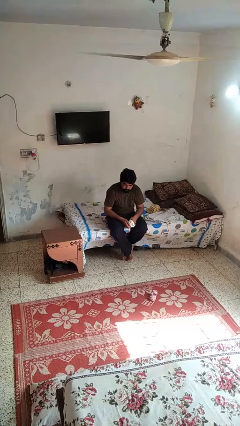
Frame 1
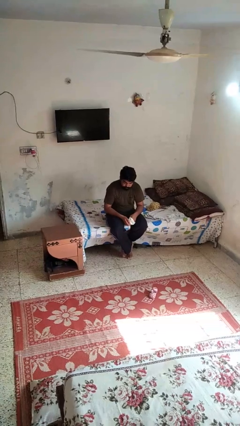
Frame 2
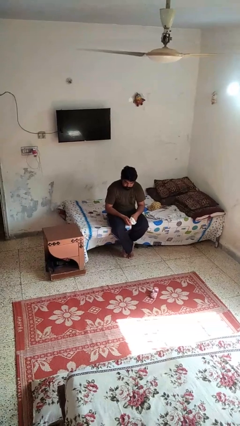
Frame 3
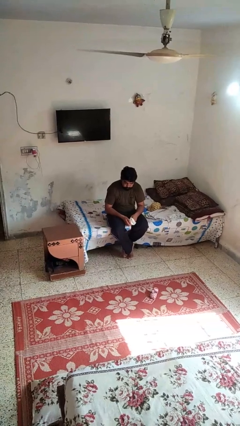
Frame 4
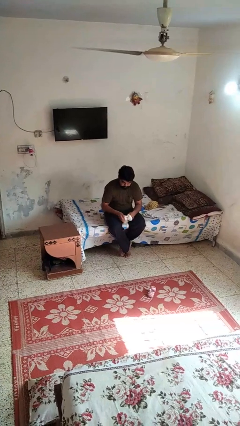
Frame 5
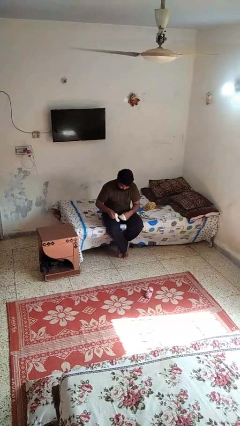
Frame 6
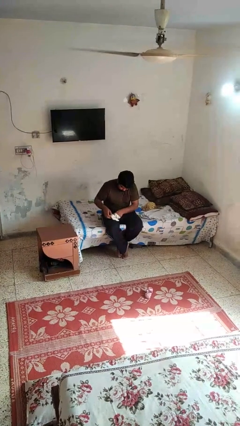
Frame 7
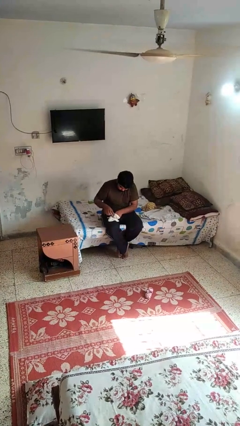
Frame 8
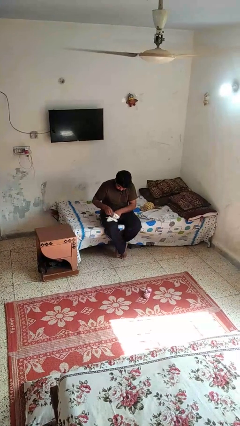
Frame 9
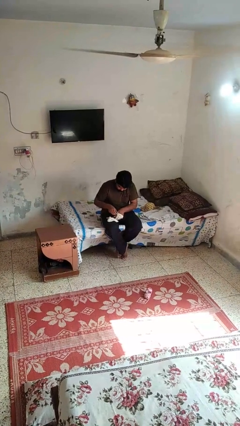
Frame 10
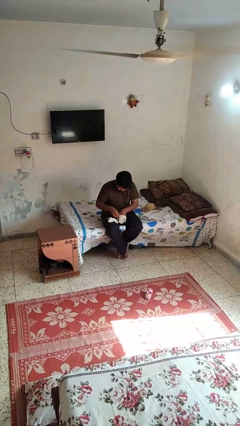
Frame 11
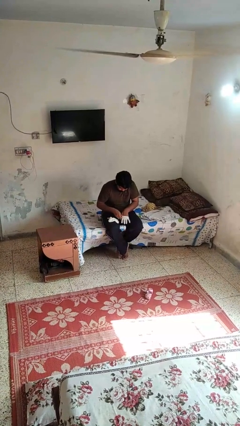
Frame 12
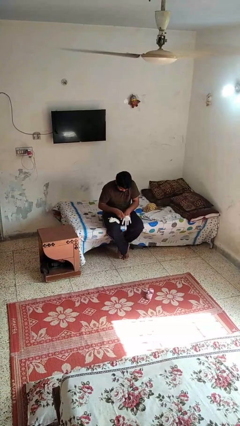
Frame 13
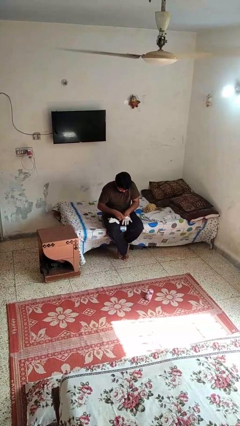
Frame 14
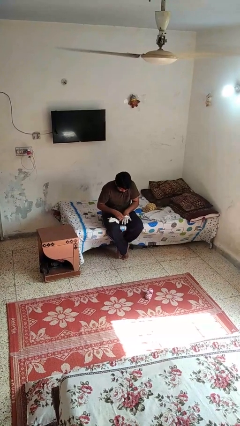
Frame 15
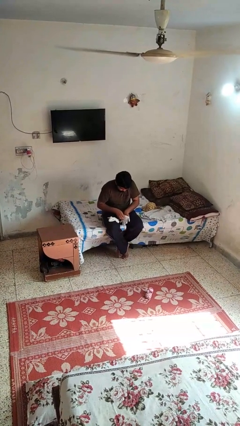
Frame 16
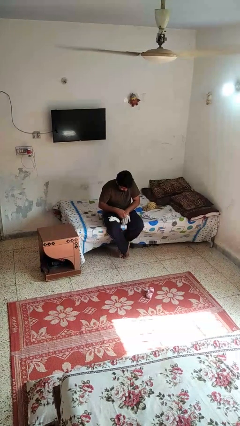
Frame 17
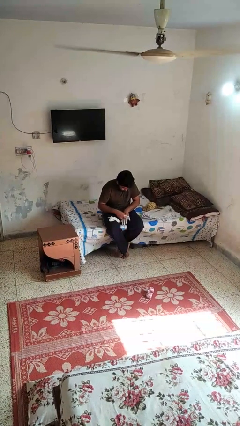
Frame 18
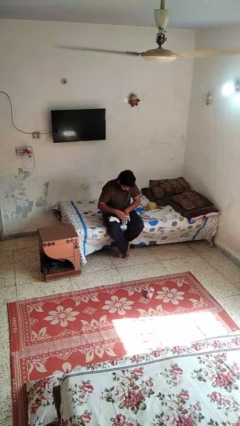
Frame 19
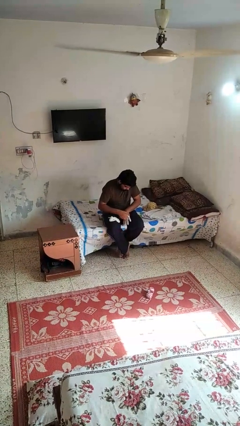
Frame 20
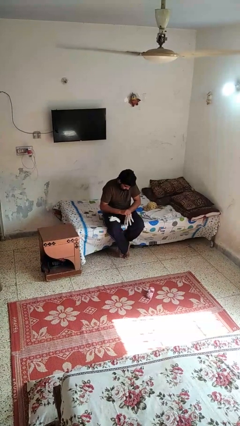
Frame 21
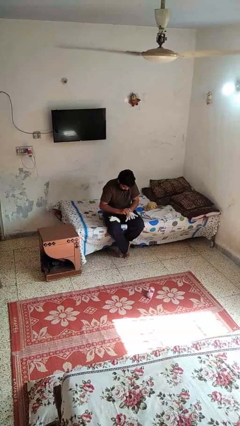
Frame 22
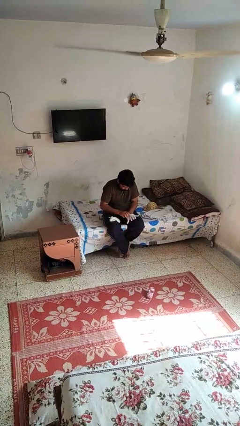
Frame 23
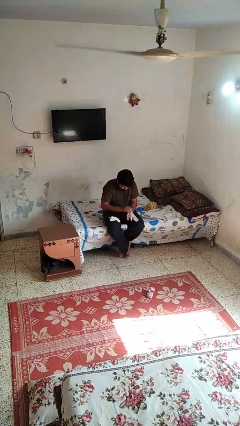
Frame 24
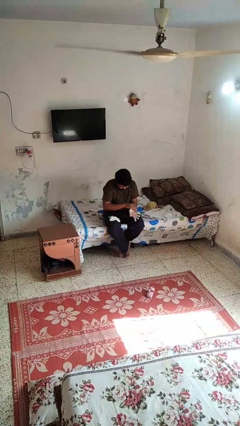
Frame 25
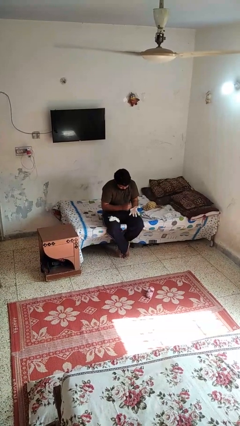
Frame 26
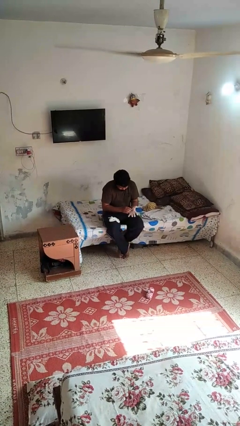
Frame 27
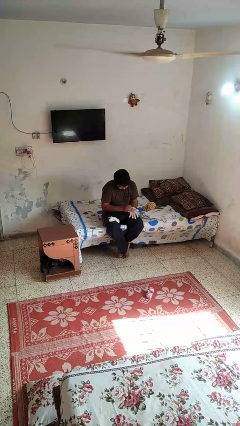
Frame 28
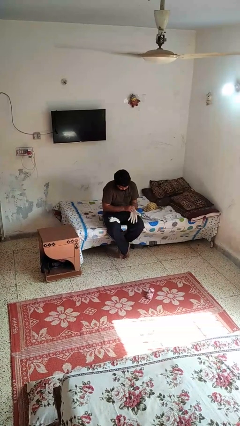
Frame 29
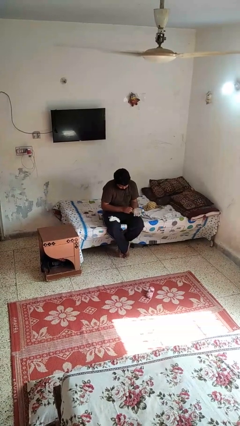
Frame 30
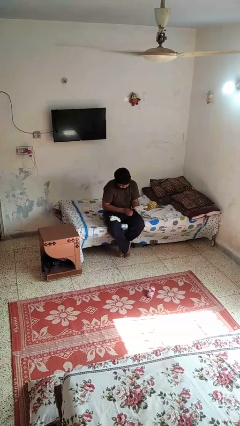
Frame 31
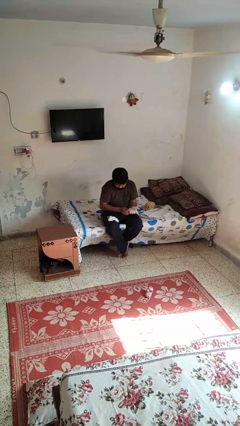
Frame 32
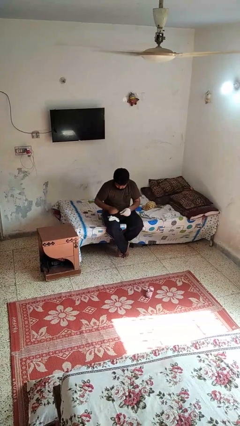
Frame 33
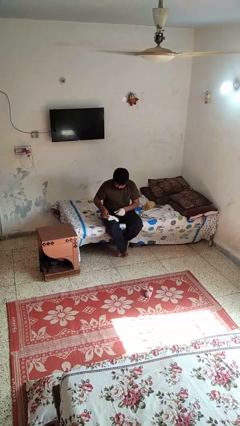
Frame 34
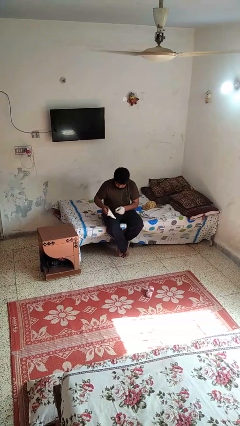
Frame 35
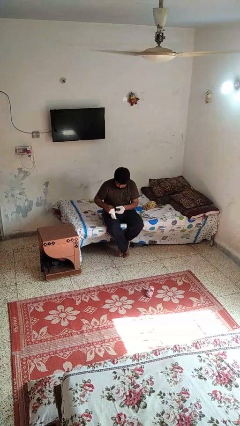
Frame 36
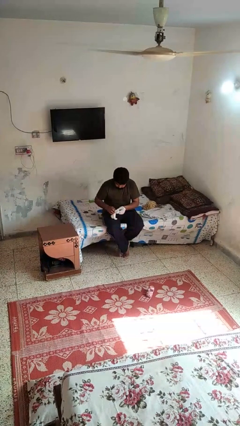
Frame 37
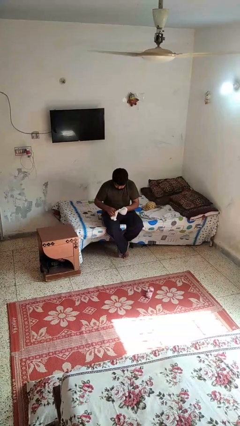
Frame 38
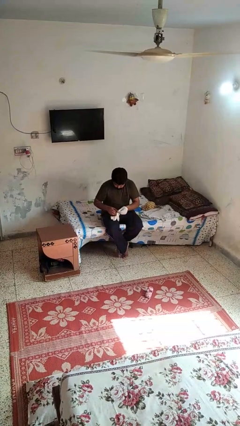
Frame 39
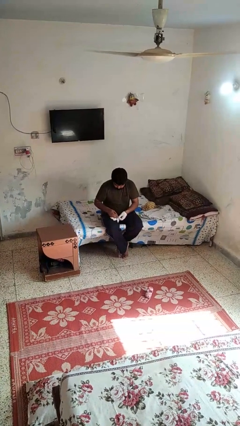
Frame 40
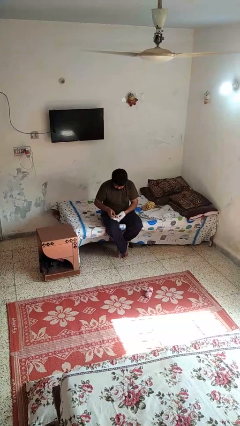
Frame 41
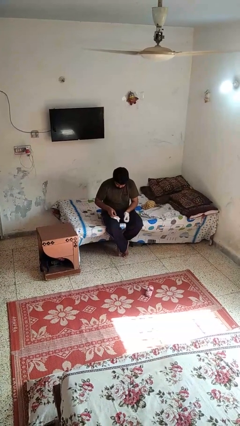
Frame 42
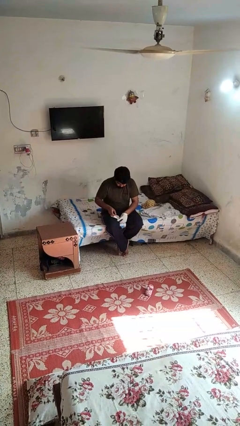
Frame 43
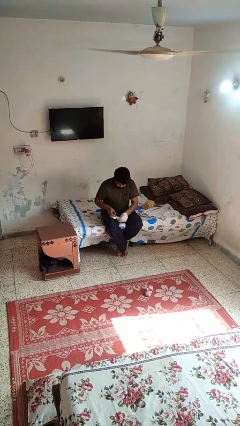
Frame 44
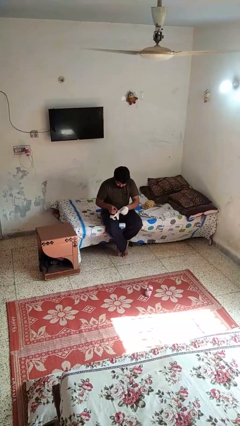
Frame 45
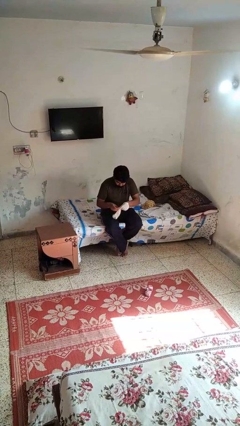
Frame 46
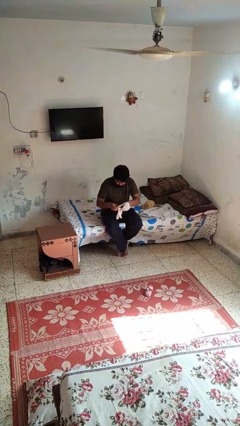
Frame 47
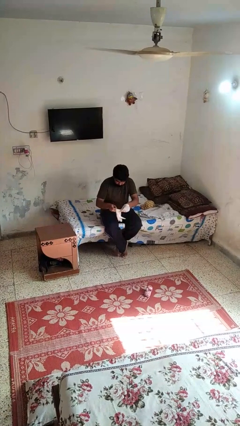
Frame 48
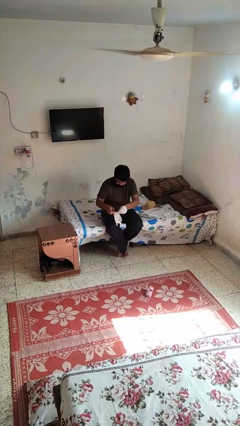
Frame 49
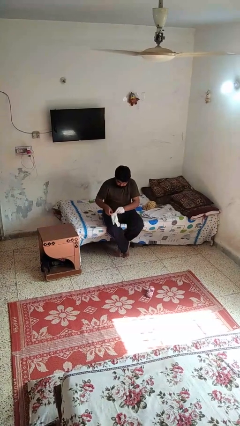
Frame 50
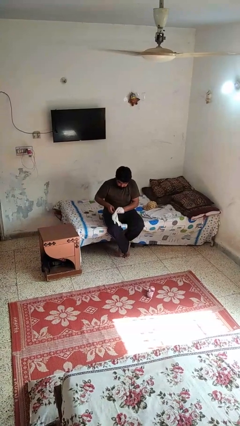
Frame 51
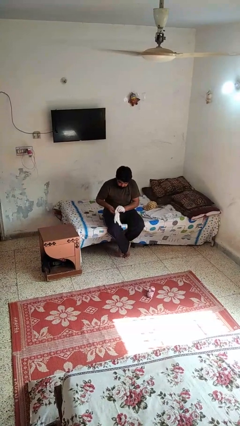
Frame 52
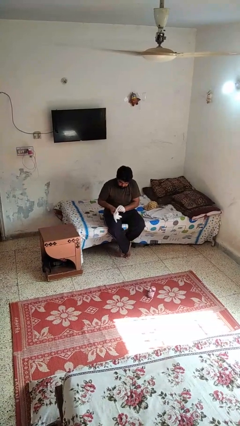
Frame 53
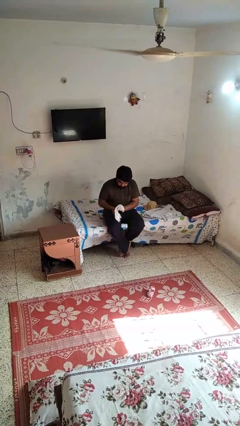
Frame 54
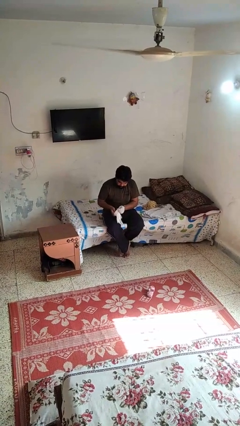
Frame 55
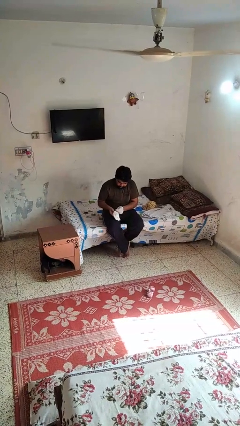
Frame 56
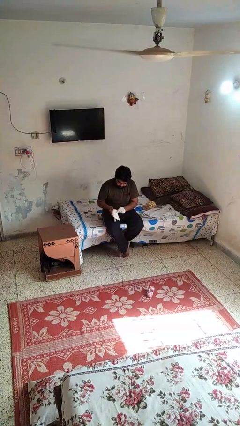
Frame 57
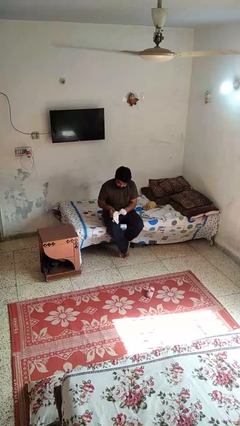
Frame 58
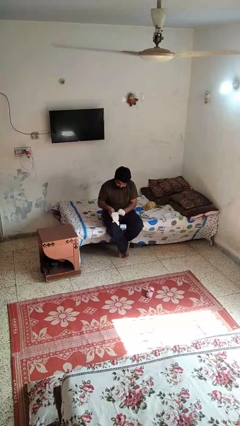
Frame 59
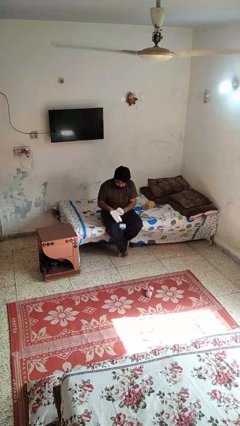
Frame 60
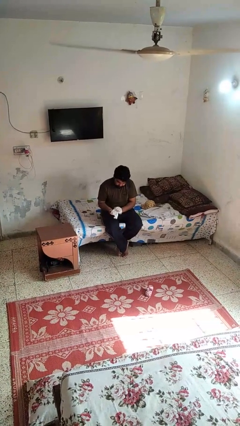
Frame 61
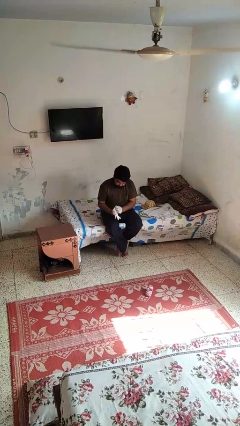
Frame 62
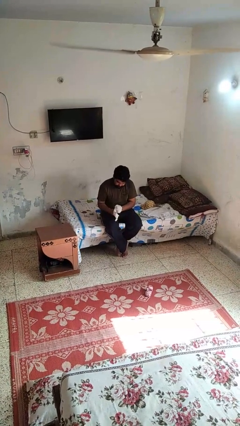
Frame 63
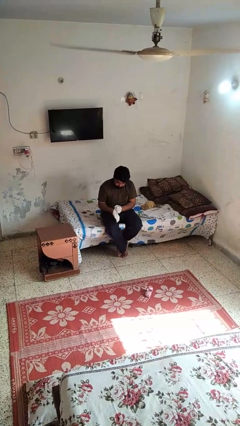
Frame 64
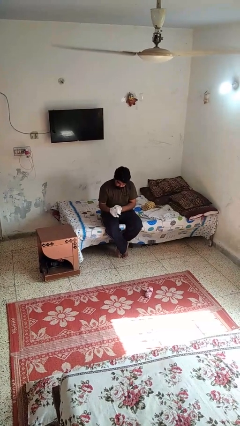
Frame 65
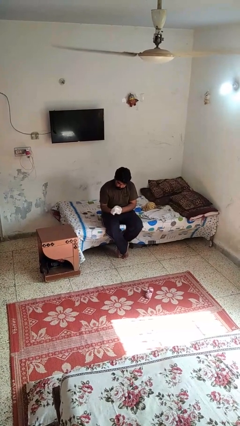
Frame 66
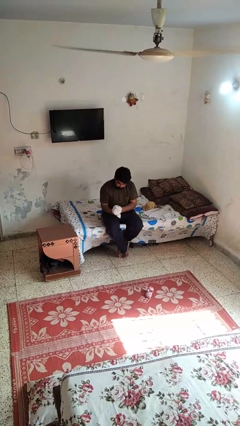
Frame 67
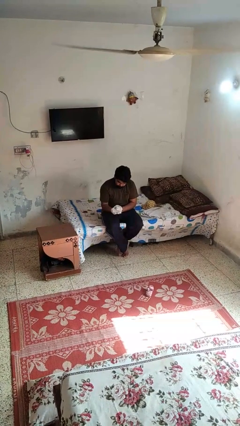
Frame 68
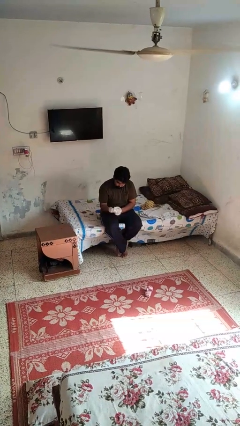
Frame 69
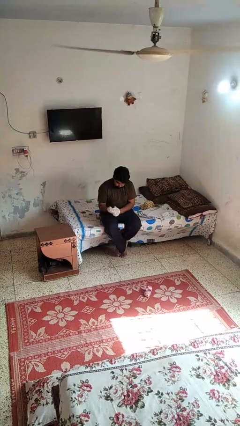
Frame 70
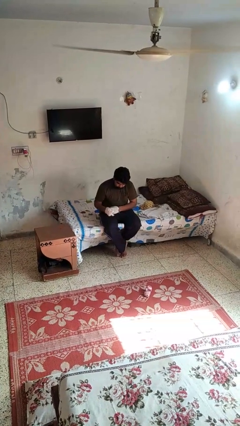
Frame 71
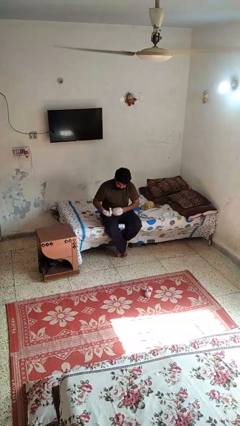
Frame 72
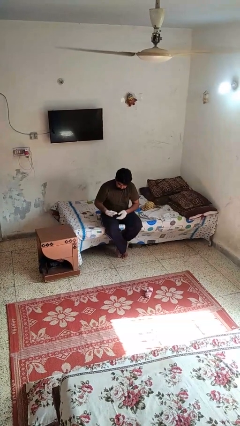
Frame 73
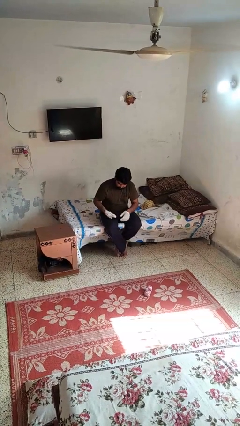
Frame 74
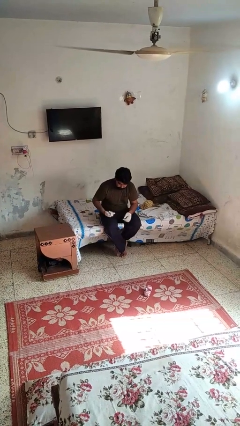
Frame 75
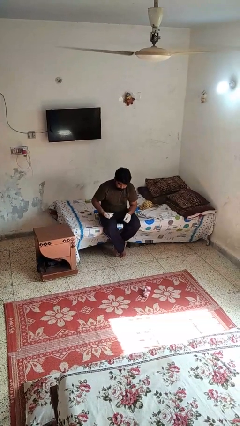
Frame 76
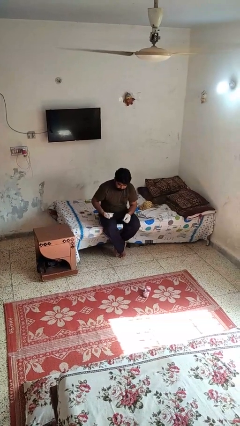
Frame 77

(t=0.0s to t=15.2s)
person puts on gloves

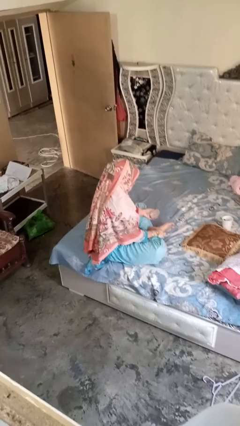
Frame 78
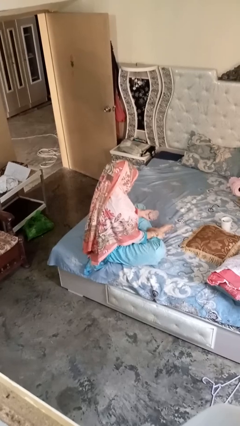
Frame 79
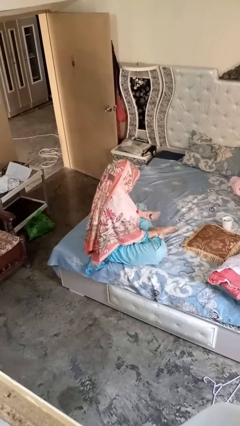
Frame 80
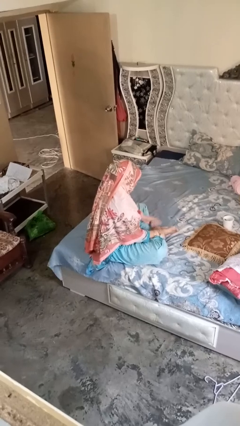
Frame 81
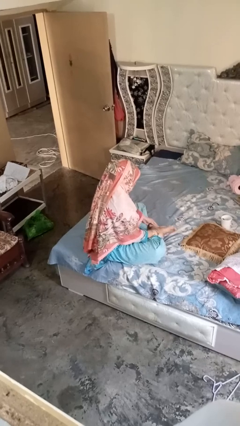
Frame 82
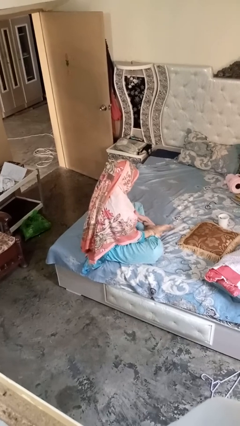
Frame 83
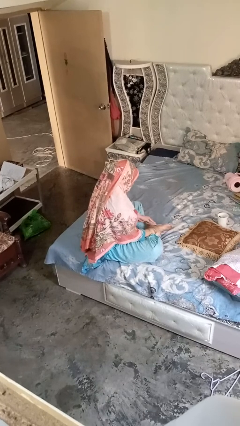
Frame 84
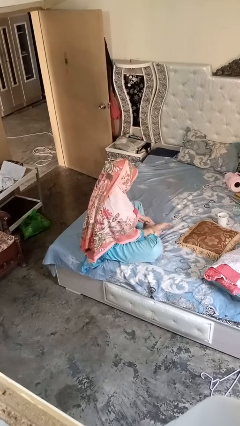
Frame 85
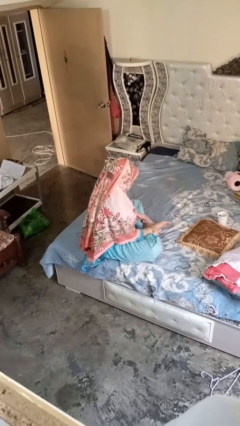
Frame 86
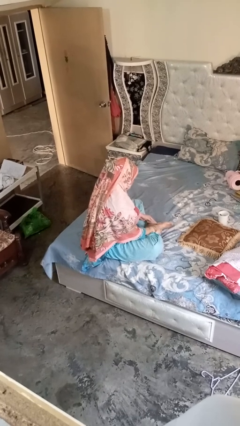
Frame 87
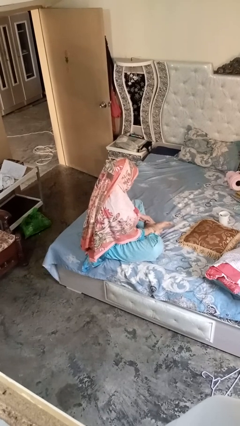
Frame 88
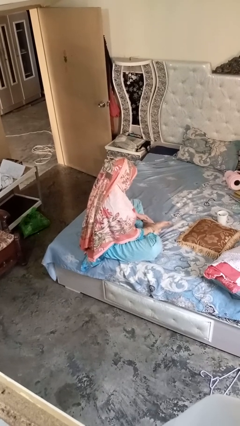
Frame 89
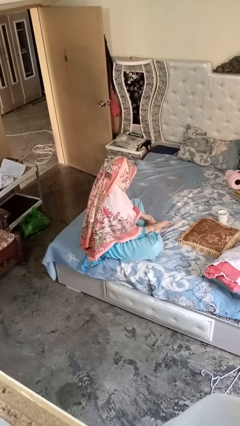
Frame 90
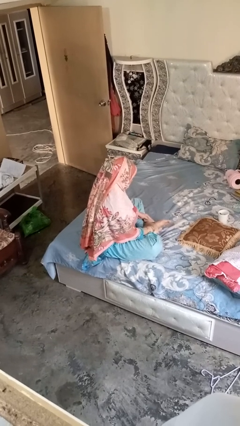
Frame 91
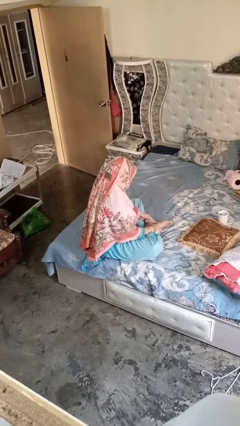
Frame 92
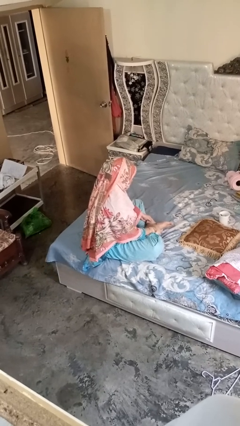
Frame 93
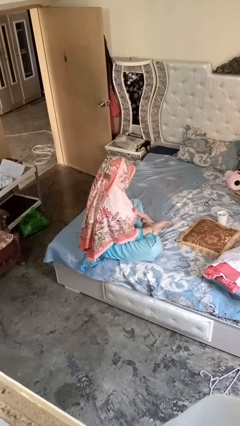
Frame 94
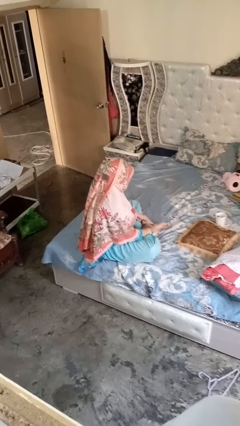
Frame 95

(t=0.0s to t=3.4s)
person rubs foot
